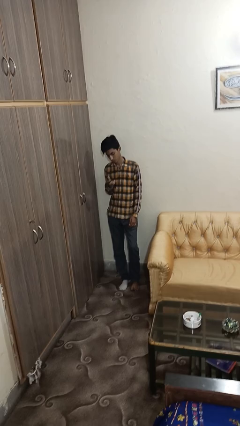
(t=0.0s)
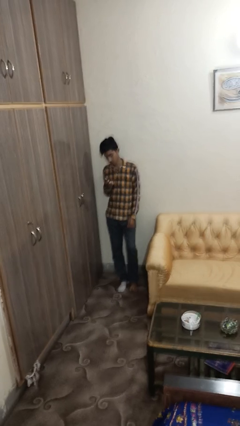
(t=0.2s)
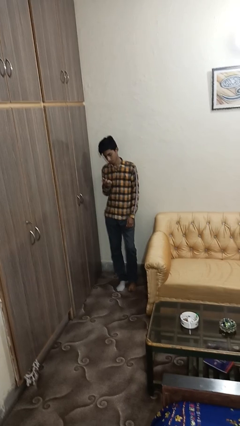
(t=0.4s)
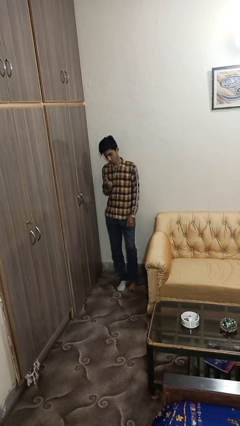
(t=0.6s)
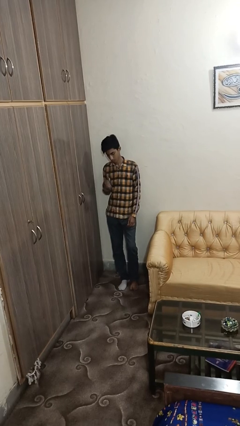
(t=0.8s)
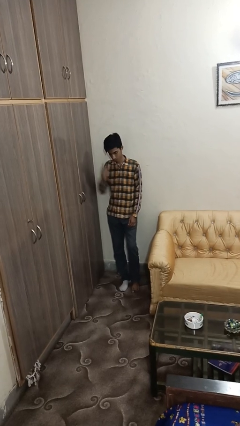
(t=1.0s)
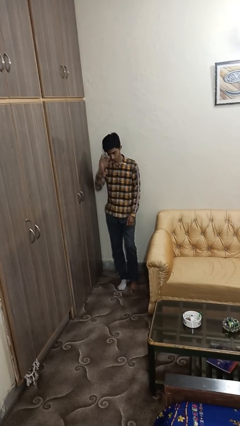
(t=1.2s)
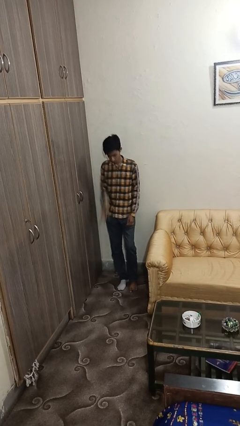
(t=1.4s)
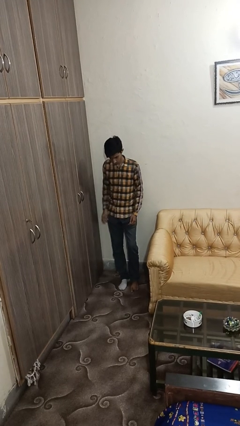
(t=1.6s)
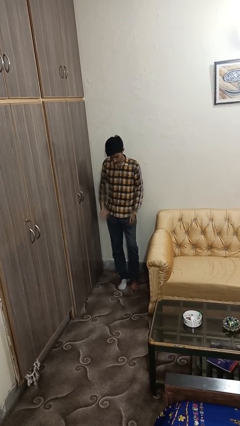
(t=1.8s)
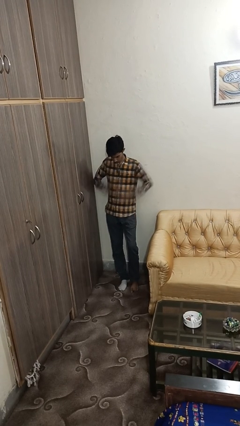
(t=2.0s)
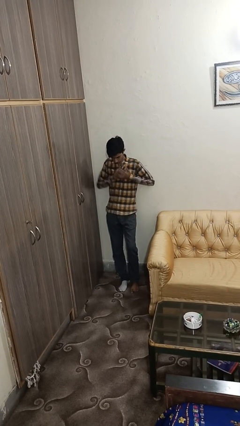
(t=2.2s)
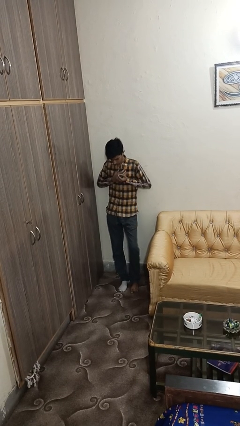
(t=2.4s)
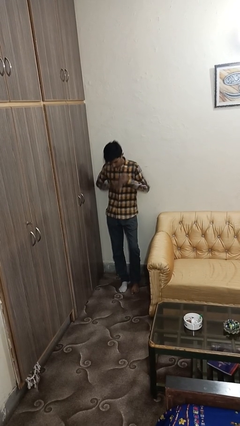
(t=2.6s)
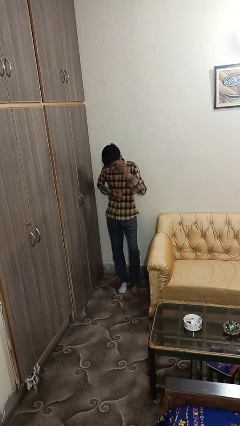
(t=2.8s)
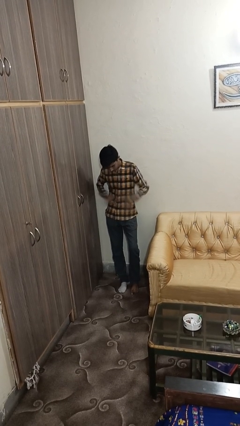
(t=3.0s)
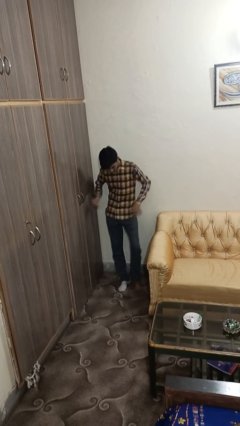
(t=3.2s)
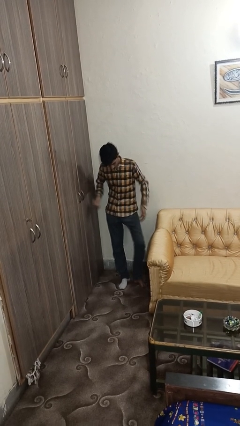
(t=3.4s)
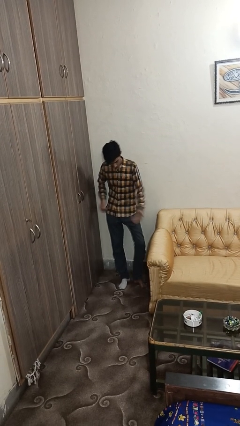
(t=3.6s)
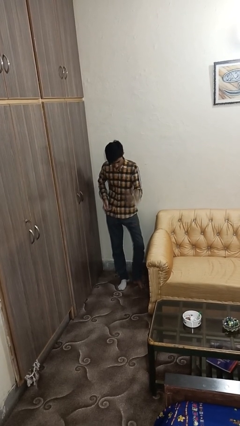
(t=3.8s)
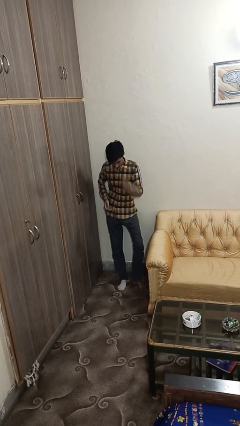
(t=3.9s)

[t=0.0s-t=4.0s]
person bounces ball on floor

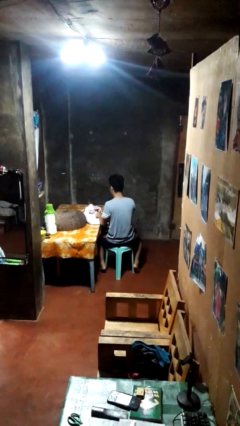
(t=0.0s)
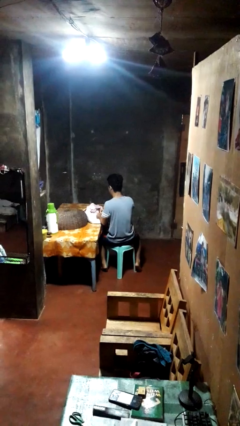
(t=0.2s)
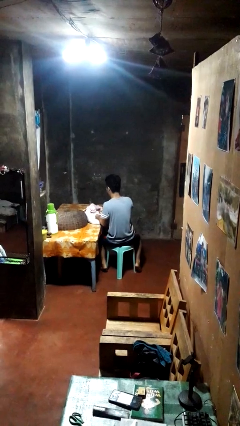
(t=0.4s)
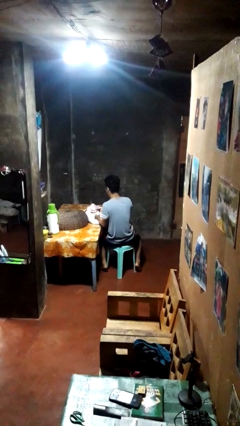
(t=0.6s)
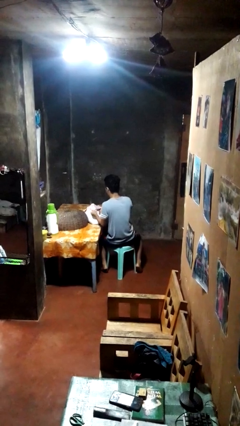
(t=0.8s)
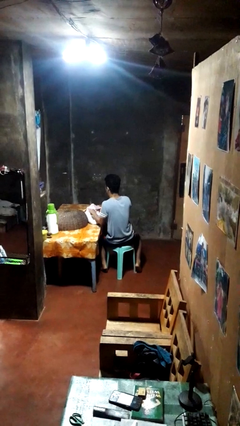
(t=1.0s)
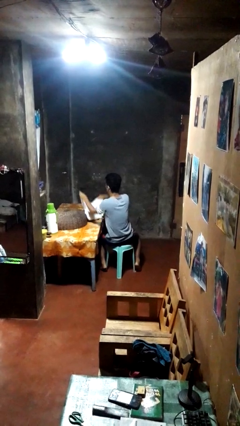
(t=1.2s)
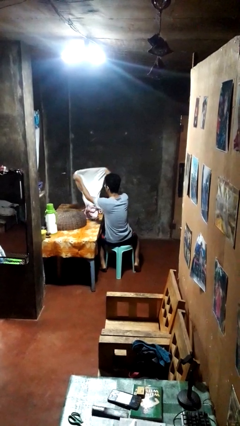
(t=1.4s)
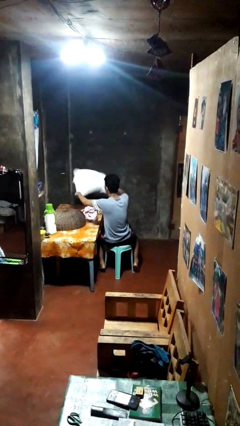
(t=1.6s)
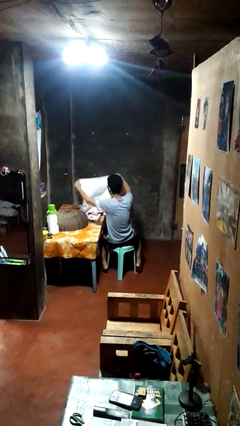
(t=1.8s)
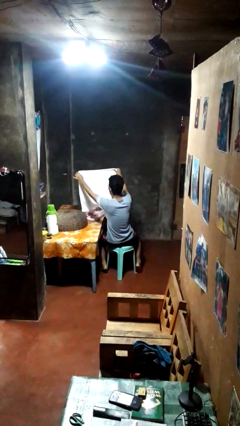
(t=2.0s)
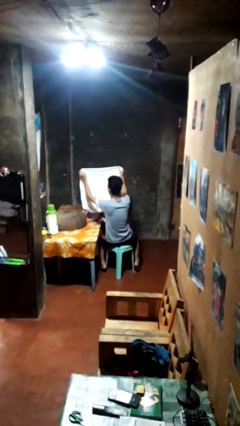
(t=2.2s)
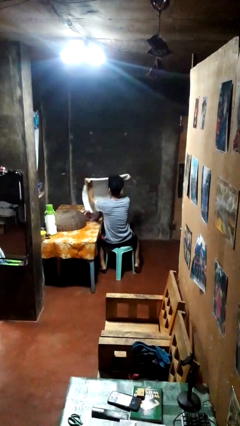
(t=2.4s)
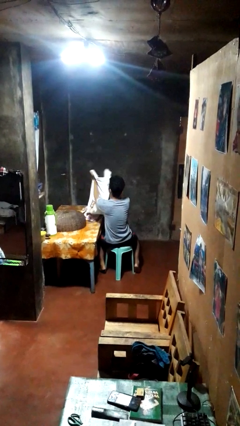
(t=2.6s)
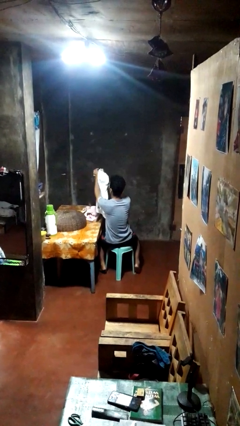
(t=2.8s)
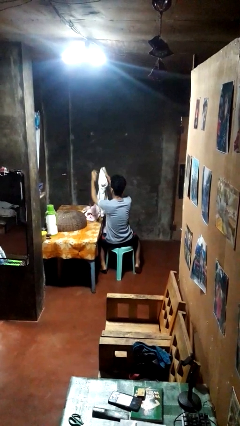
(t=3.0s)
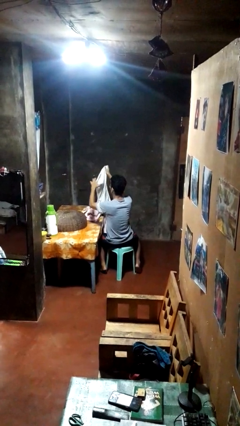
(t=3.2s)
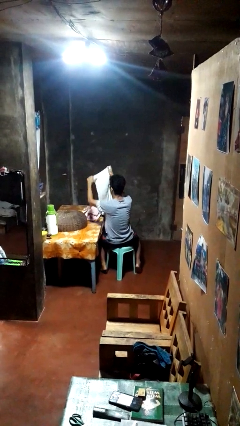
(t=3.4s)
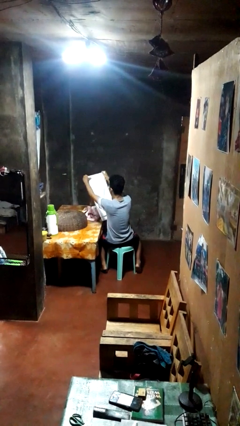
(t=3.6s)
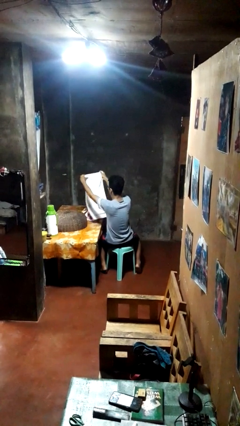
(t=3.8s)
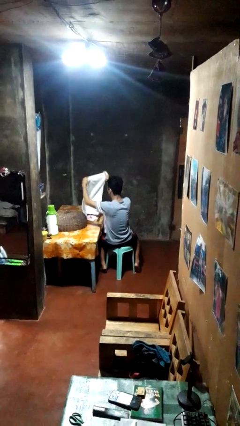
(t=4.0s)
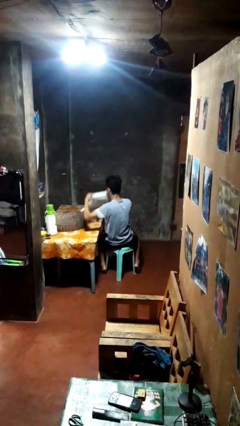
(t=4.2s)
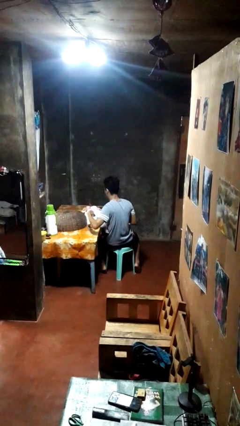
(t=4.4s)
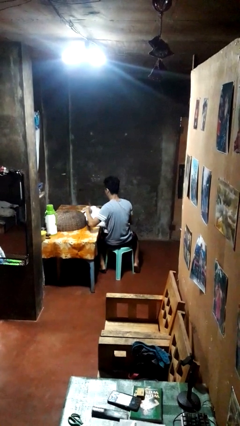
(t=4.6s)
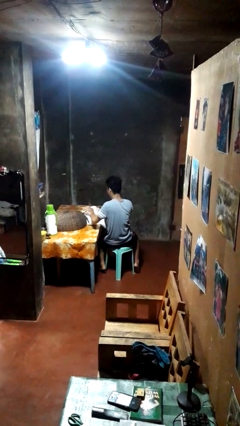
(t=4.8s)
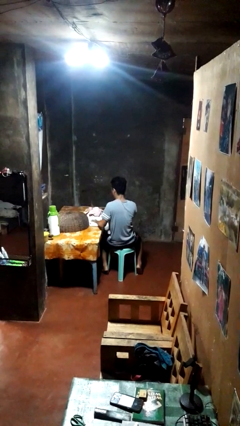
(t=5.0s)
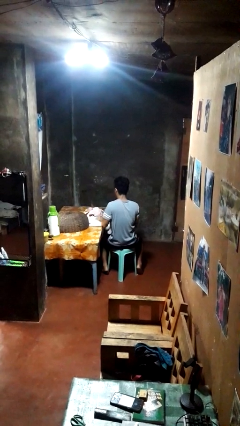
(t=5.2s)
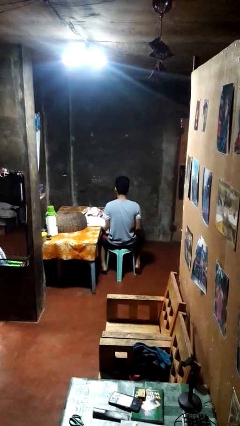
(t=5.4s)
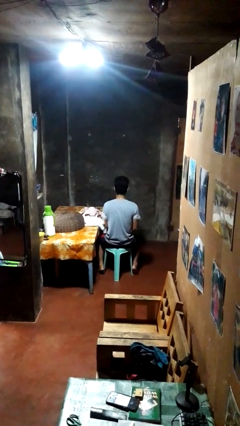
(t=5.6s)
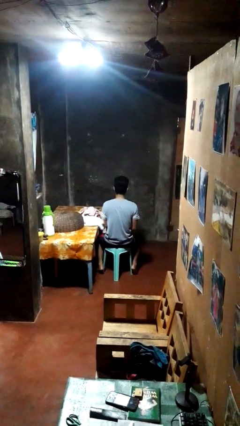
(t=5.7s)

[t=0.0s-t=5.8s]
person folds towel

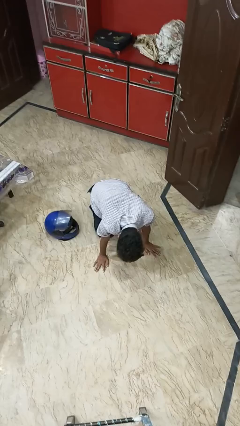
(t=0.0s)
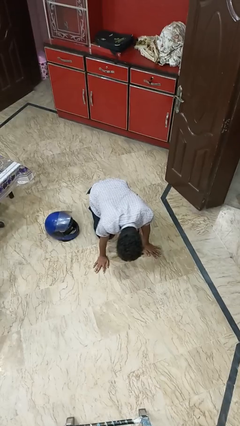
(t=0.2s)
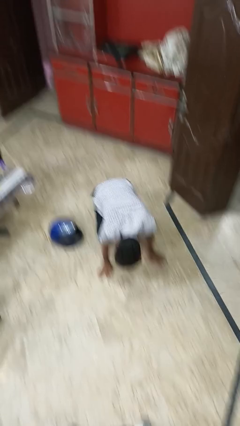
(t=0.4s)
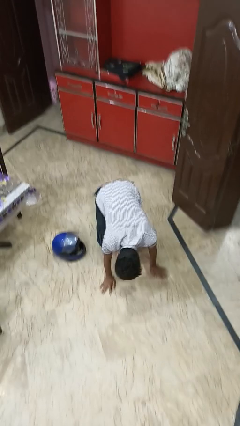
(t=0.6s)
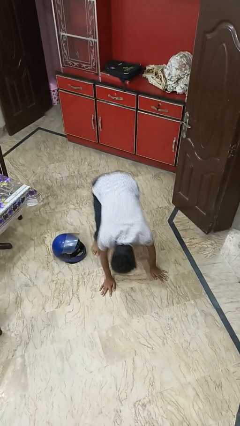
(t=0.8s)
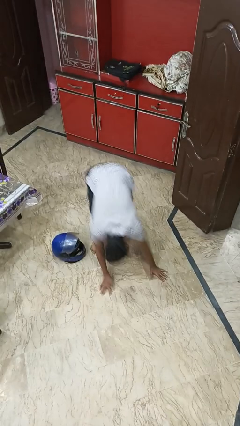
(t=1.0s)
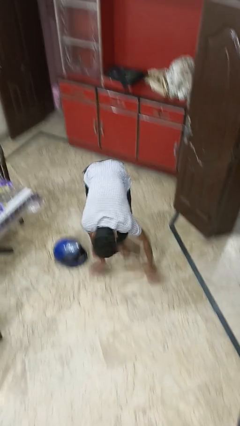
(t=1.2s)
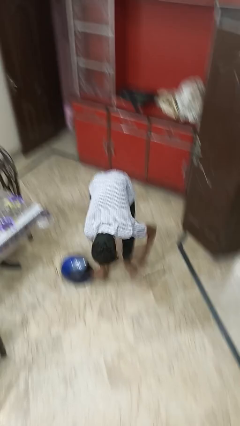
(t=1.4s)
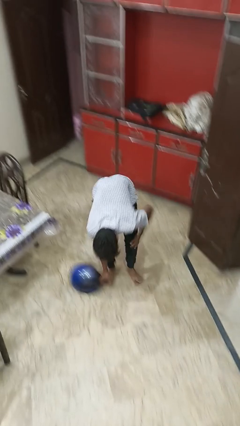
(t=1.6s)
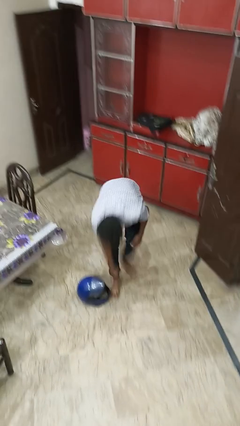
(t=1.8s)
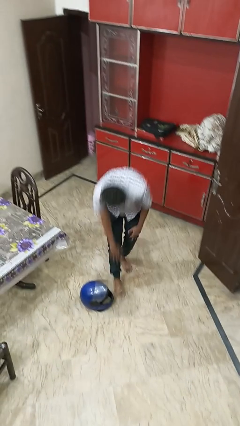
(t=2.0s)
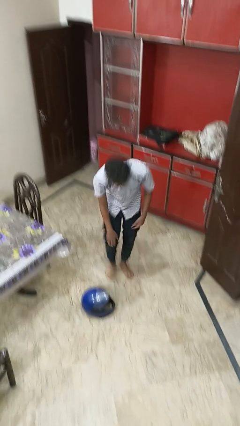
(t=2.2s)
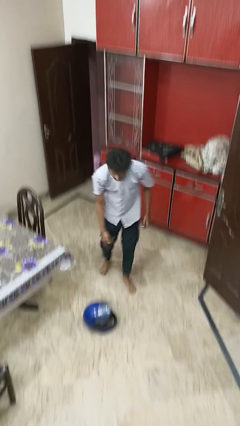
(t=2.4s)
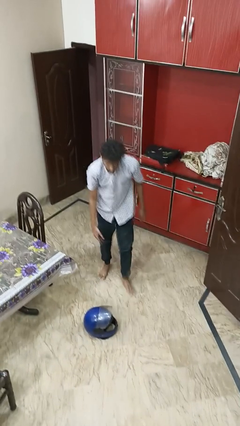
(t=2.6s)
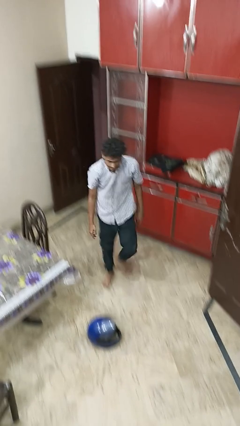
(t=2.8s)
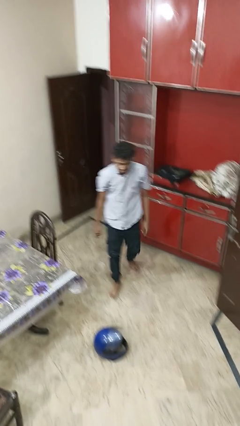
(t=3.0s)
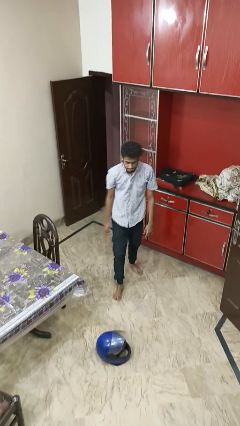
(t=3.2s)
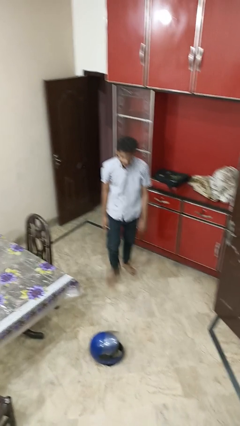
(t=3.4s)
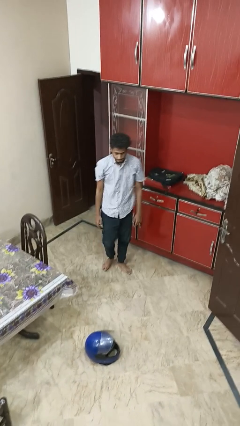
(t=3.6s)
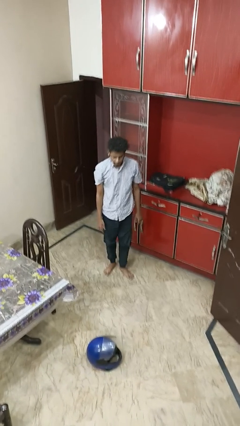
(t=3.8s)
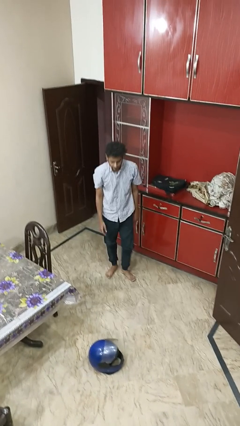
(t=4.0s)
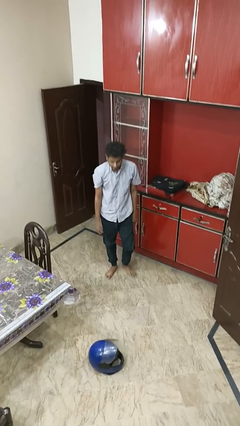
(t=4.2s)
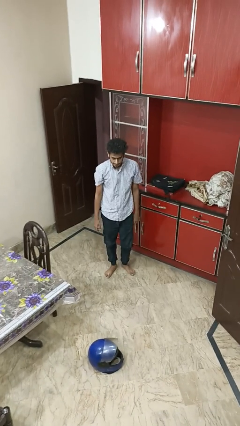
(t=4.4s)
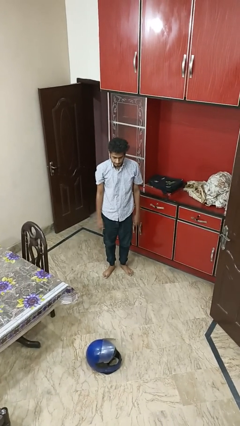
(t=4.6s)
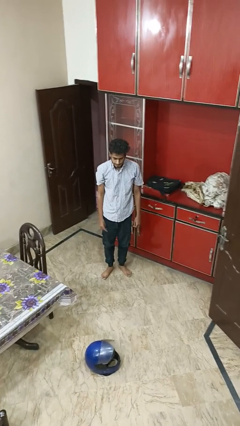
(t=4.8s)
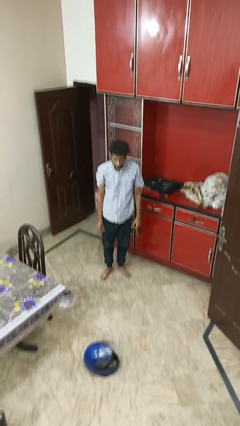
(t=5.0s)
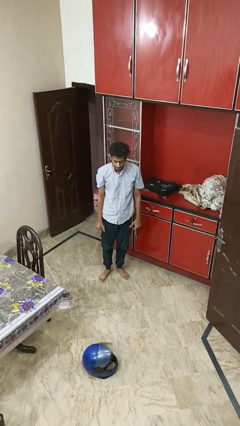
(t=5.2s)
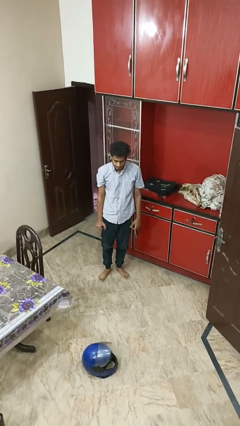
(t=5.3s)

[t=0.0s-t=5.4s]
person stands up from floor

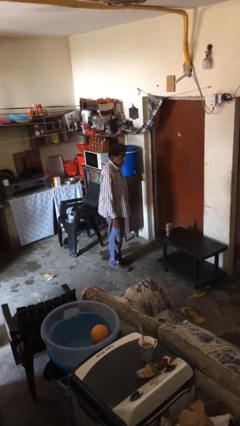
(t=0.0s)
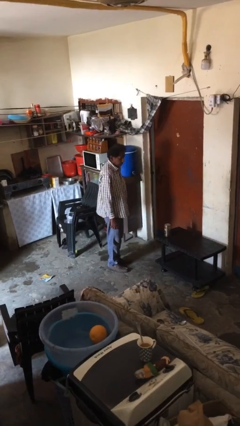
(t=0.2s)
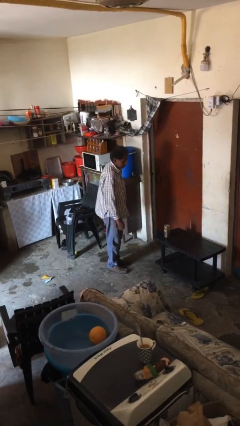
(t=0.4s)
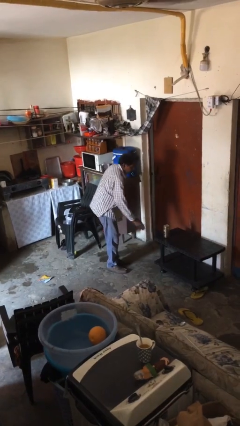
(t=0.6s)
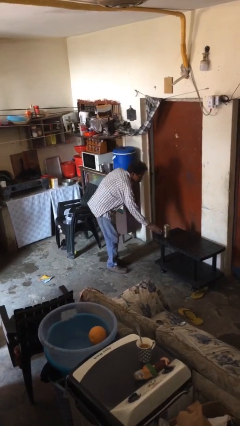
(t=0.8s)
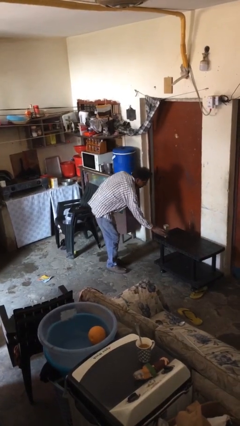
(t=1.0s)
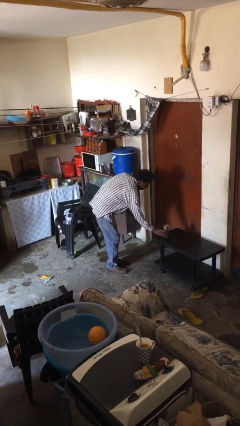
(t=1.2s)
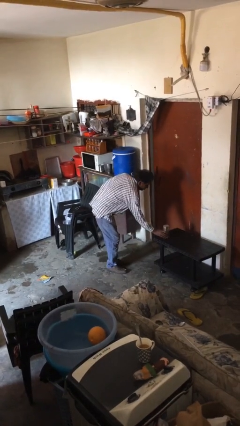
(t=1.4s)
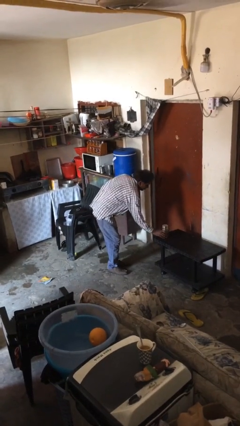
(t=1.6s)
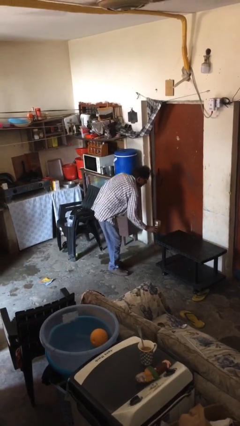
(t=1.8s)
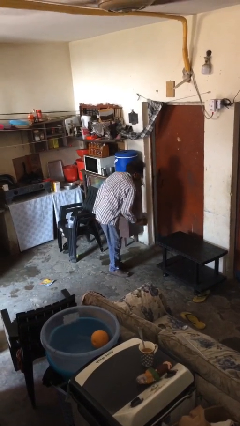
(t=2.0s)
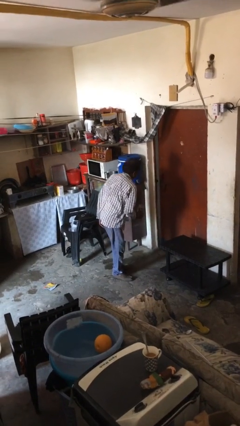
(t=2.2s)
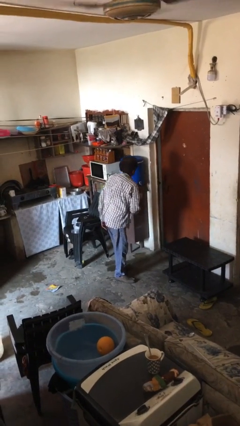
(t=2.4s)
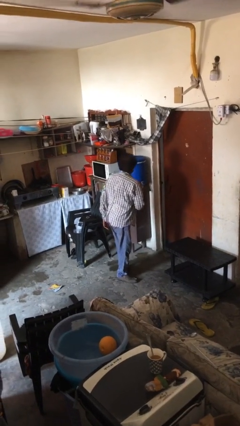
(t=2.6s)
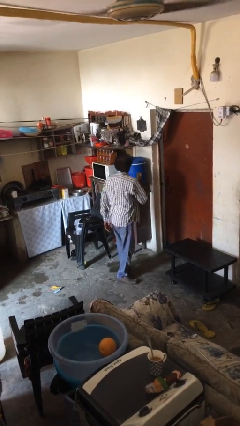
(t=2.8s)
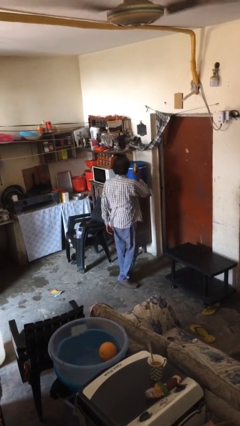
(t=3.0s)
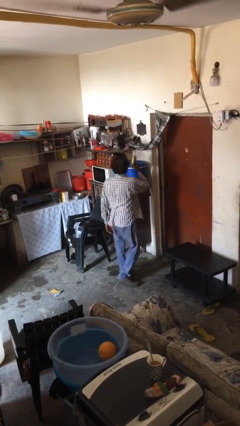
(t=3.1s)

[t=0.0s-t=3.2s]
person picks up object from table
